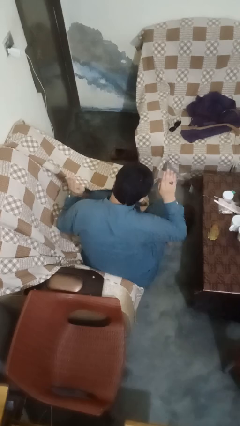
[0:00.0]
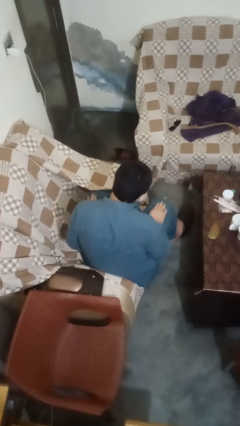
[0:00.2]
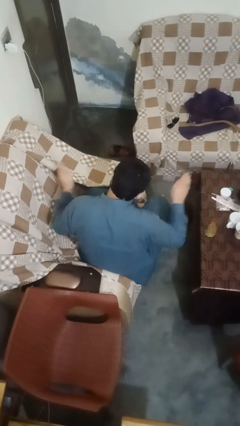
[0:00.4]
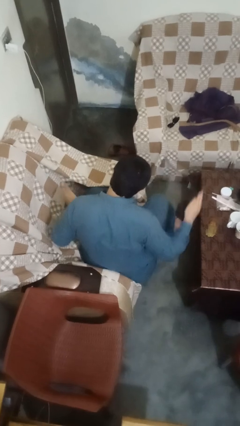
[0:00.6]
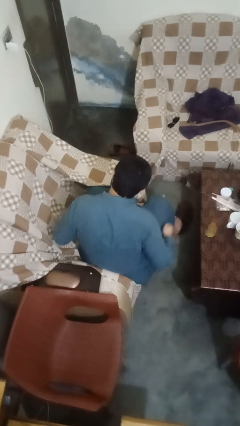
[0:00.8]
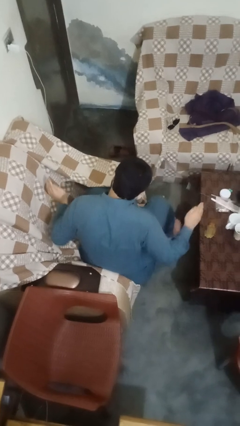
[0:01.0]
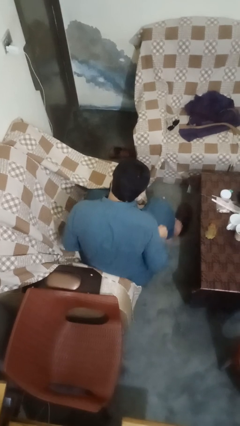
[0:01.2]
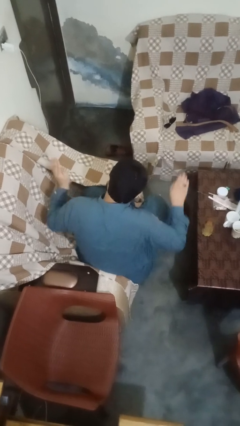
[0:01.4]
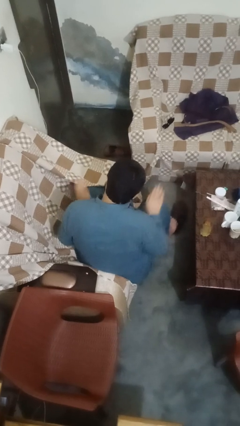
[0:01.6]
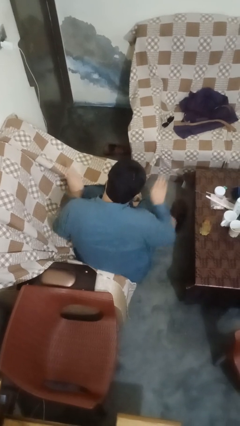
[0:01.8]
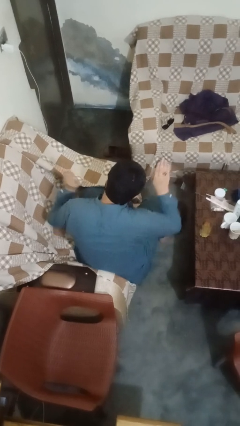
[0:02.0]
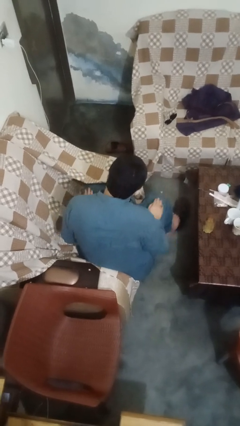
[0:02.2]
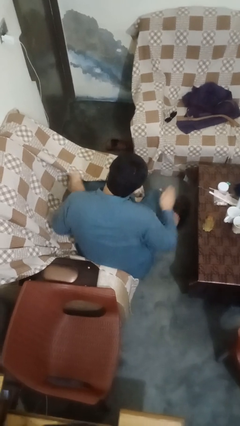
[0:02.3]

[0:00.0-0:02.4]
person slaps hands on thighs

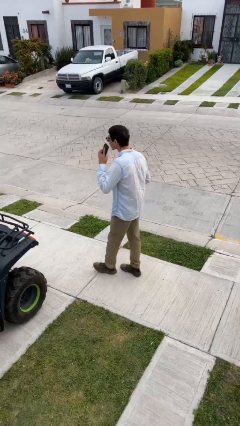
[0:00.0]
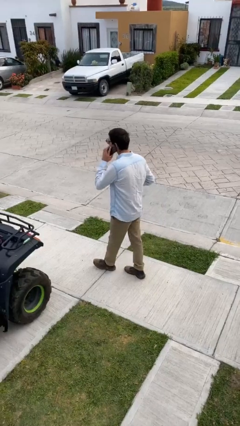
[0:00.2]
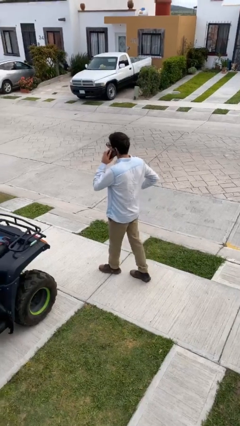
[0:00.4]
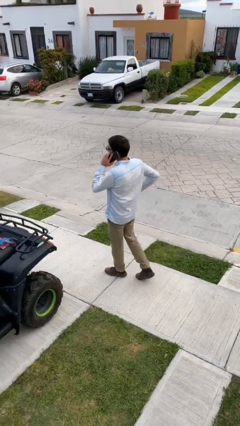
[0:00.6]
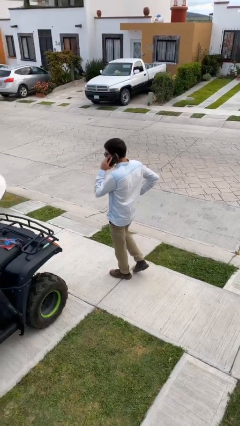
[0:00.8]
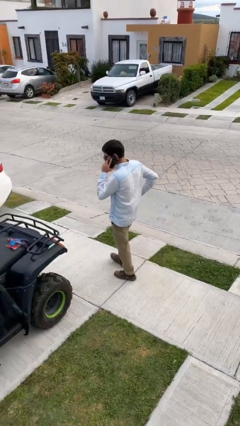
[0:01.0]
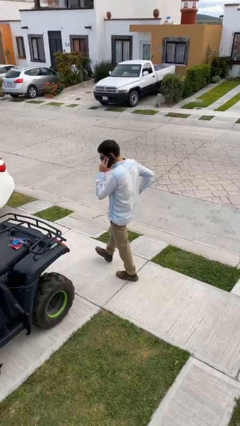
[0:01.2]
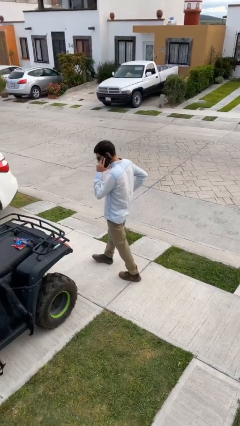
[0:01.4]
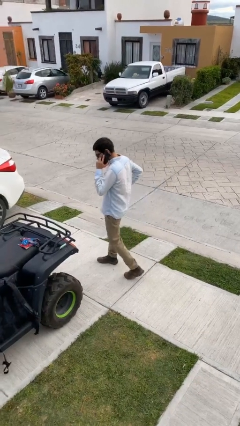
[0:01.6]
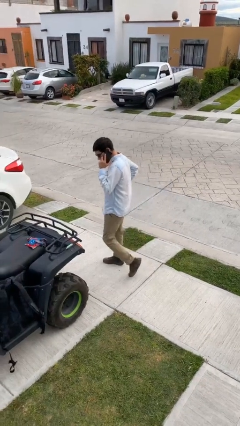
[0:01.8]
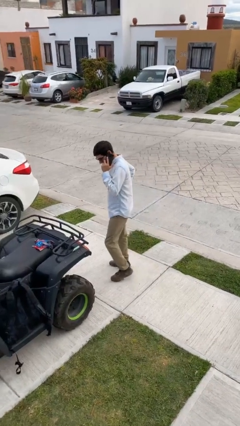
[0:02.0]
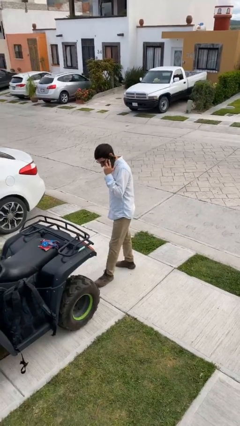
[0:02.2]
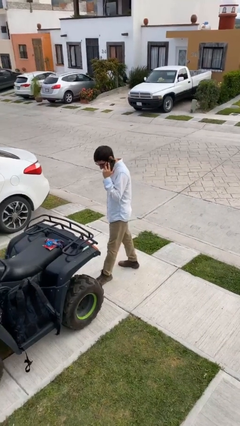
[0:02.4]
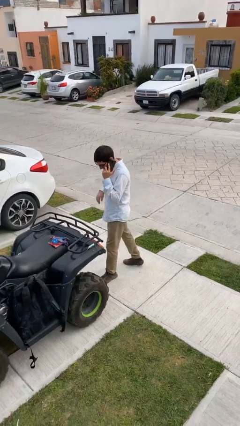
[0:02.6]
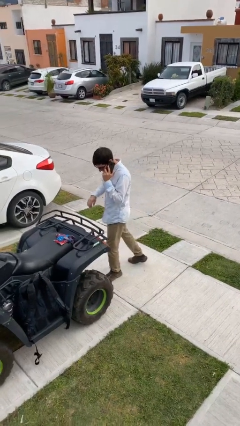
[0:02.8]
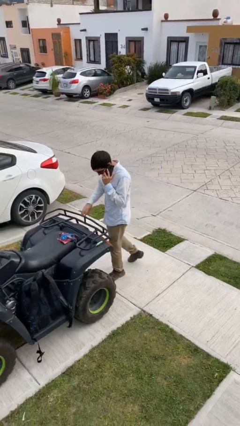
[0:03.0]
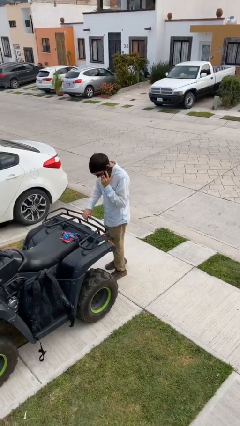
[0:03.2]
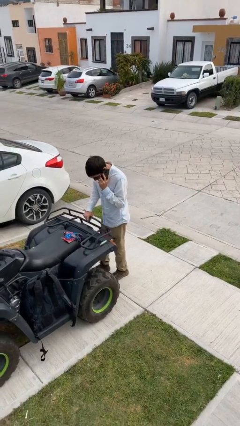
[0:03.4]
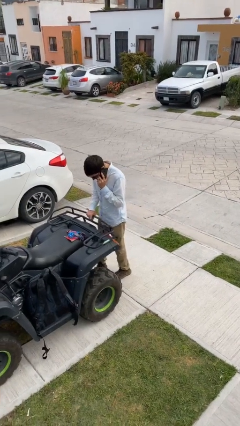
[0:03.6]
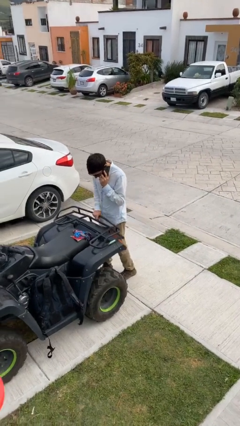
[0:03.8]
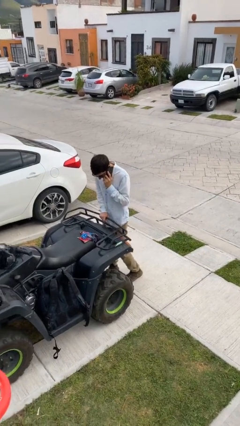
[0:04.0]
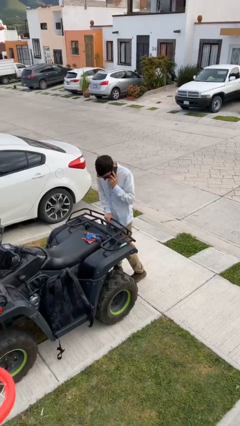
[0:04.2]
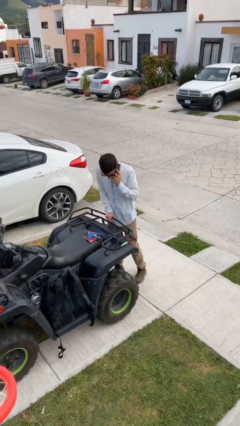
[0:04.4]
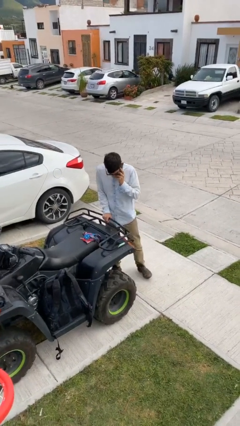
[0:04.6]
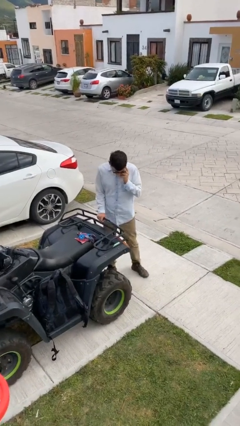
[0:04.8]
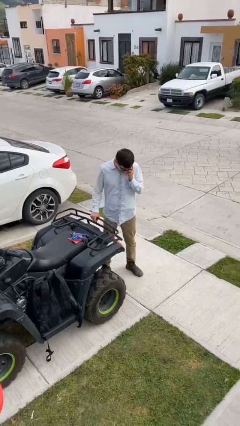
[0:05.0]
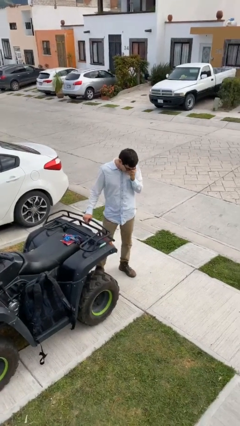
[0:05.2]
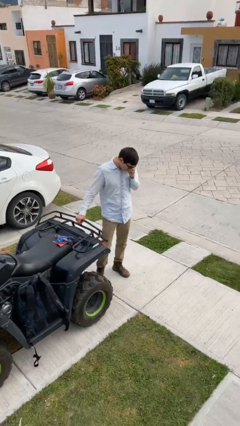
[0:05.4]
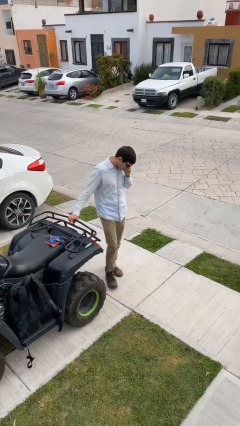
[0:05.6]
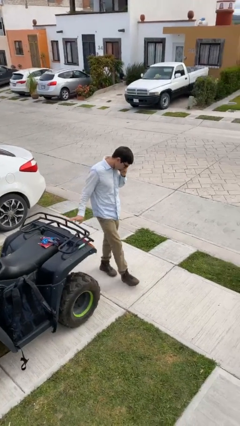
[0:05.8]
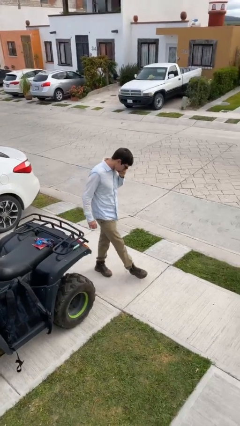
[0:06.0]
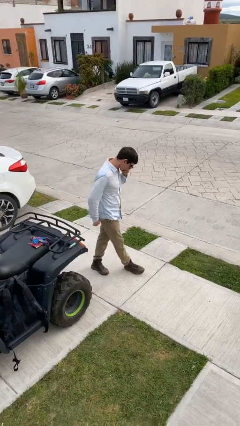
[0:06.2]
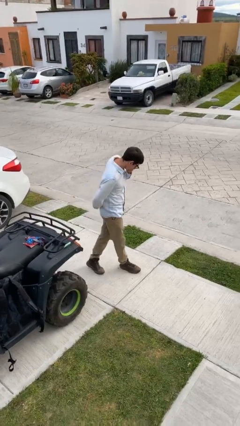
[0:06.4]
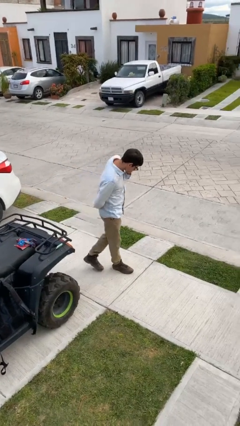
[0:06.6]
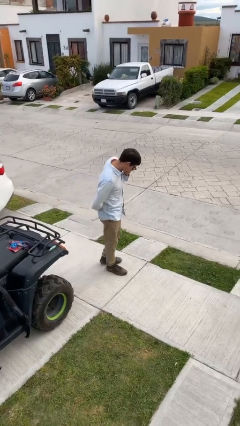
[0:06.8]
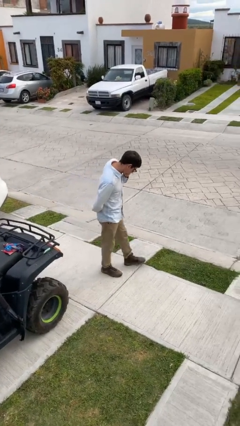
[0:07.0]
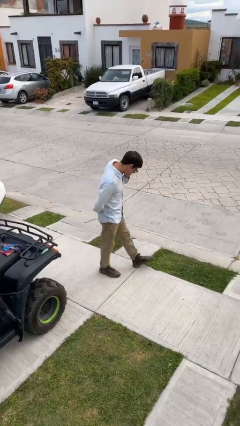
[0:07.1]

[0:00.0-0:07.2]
person talks on phone

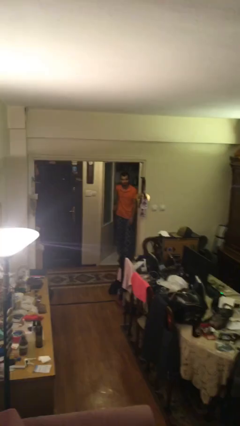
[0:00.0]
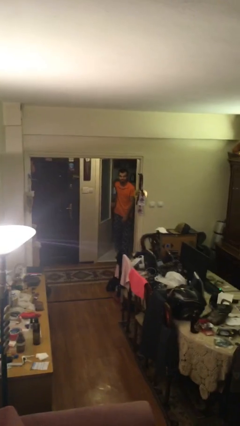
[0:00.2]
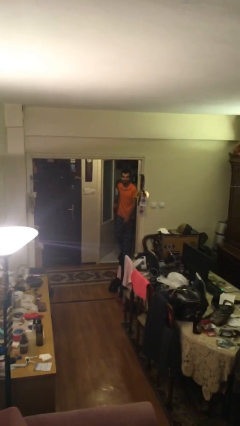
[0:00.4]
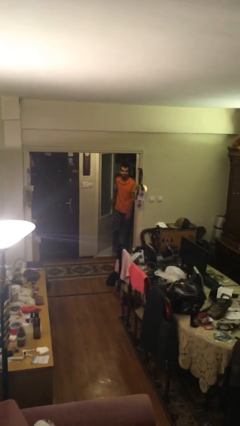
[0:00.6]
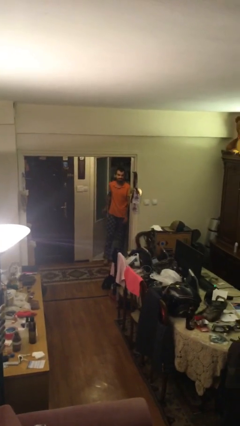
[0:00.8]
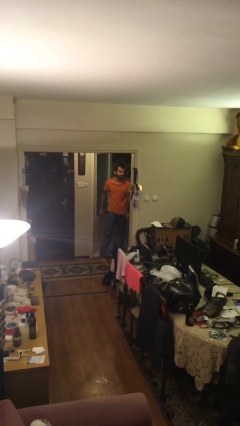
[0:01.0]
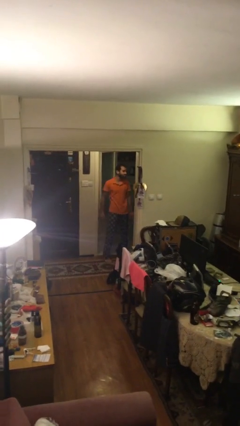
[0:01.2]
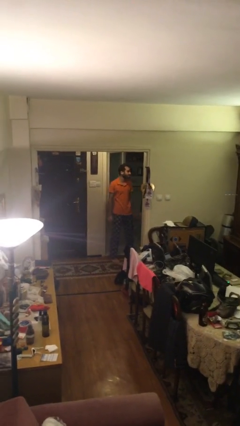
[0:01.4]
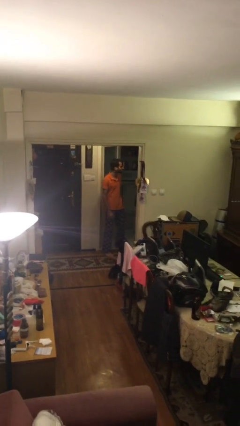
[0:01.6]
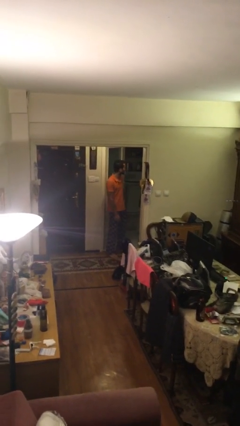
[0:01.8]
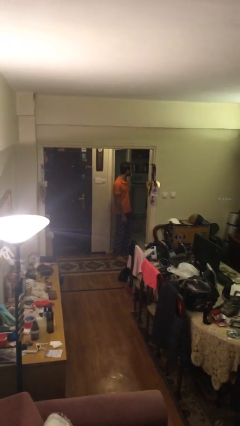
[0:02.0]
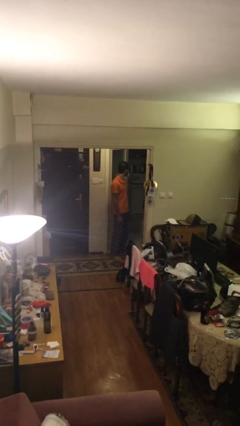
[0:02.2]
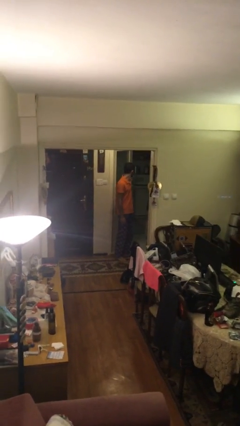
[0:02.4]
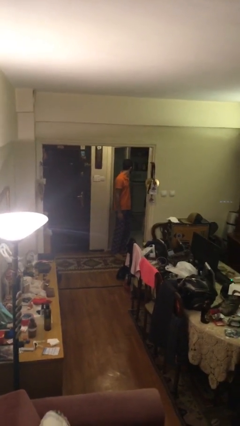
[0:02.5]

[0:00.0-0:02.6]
person enters scene through structure

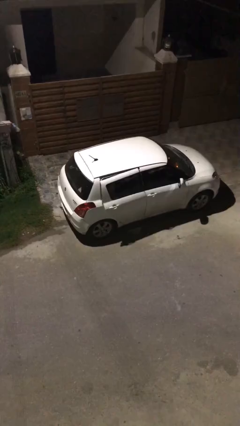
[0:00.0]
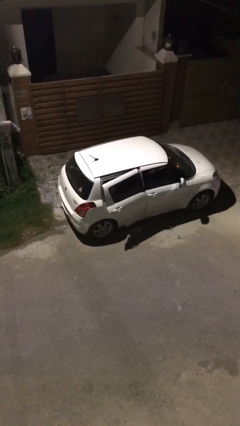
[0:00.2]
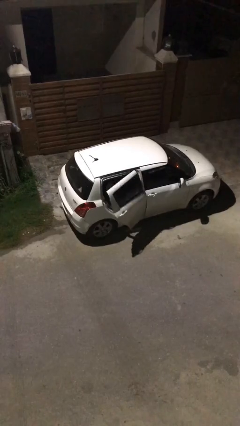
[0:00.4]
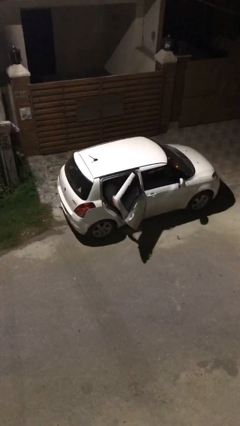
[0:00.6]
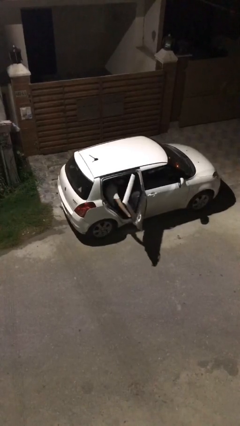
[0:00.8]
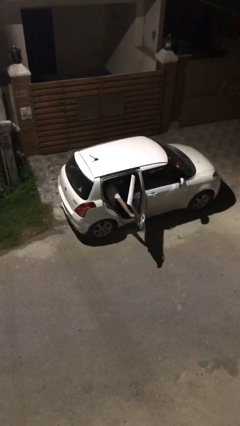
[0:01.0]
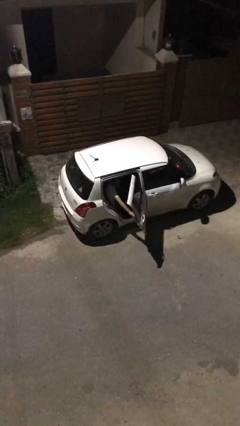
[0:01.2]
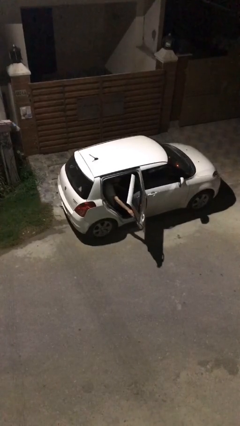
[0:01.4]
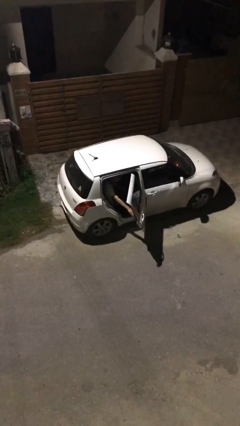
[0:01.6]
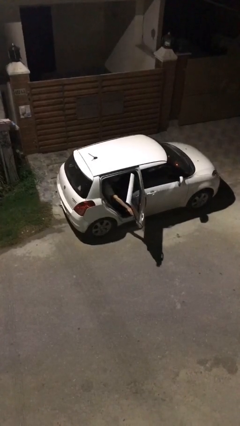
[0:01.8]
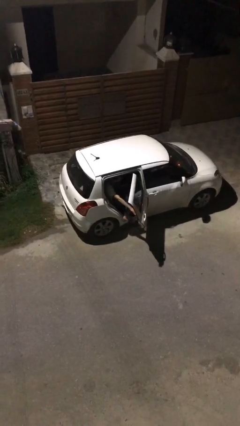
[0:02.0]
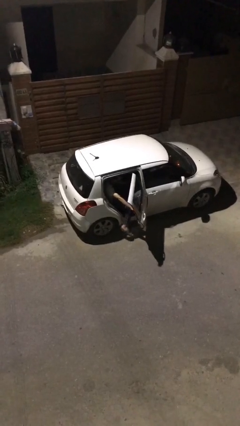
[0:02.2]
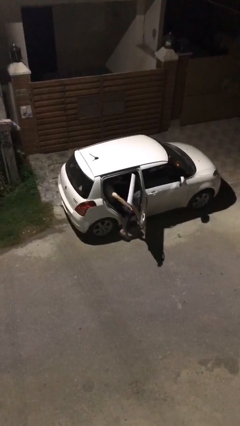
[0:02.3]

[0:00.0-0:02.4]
person opens car door

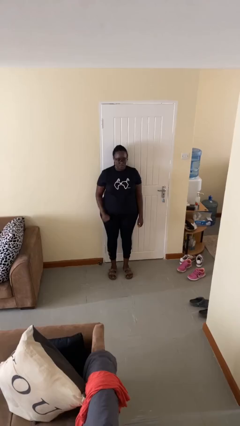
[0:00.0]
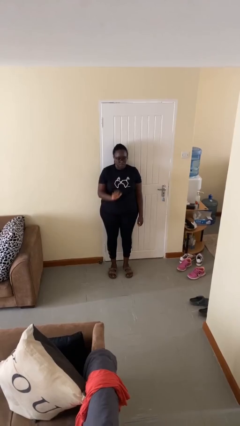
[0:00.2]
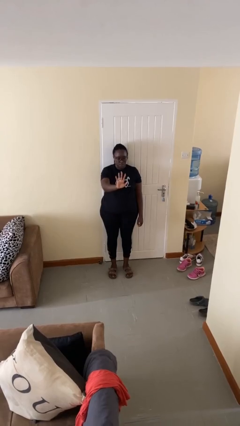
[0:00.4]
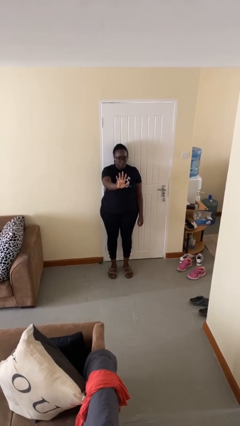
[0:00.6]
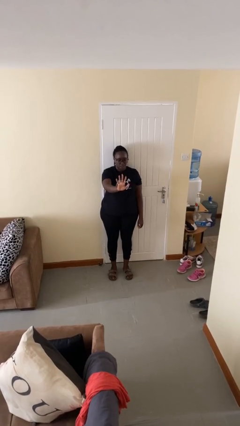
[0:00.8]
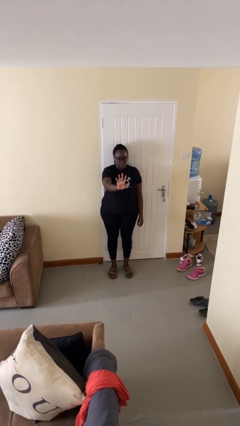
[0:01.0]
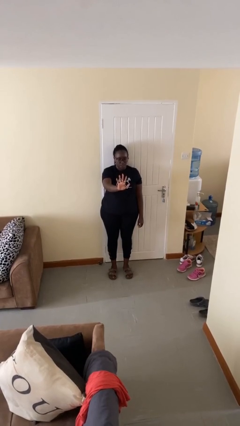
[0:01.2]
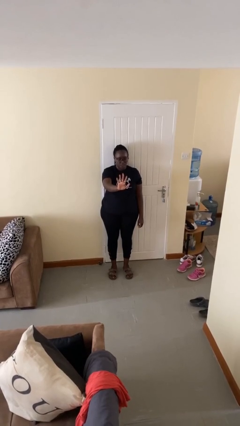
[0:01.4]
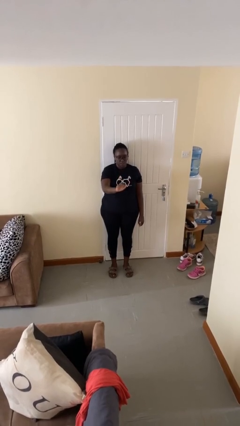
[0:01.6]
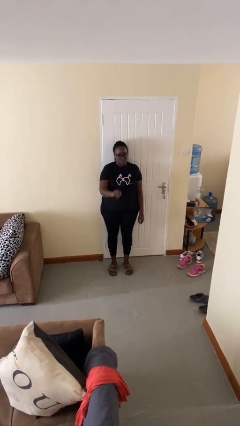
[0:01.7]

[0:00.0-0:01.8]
person gestures number five

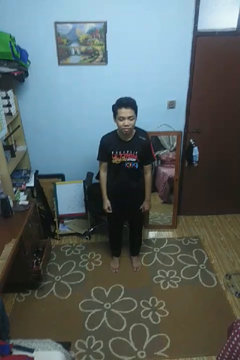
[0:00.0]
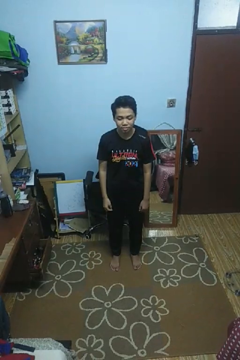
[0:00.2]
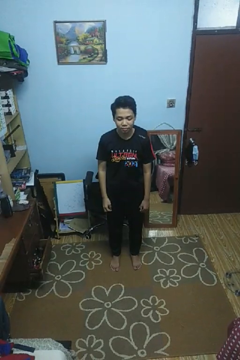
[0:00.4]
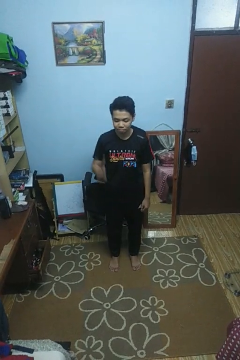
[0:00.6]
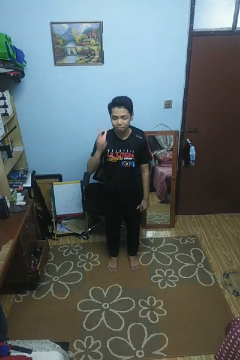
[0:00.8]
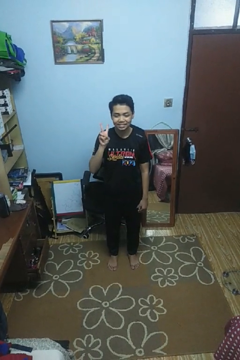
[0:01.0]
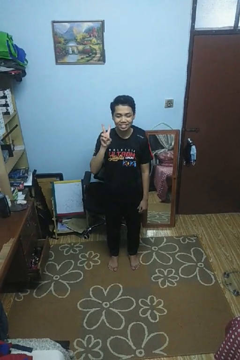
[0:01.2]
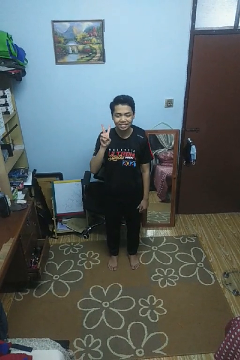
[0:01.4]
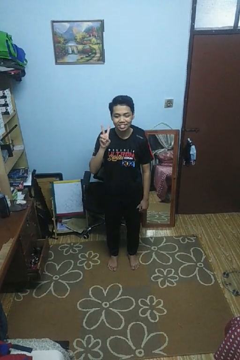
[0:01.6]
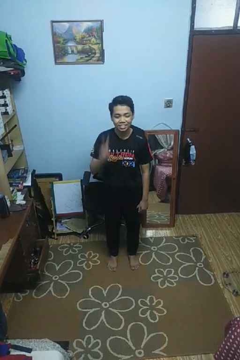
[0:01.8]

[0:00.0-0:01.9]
person gestures peace
